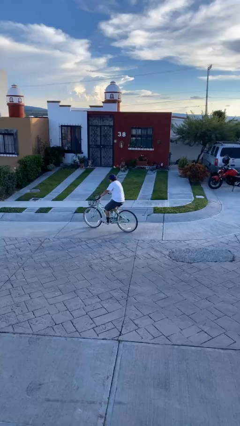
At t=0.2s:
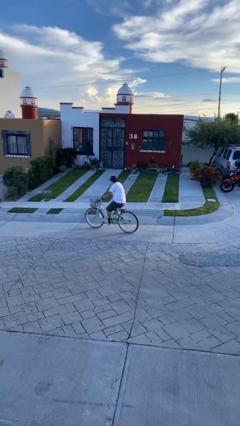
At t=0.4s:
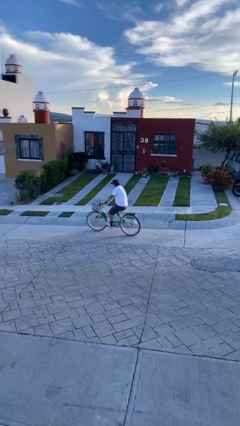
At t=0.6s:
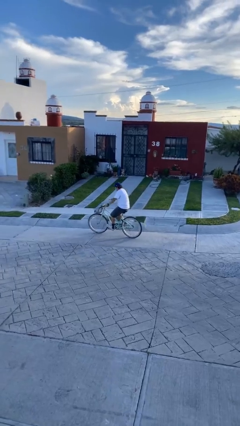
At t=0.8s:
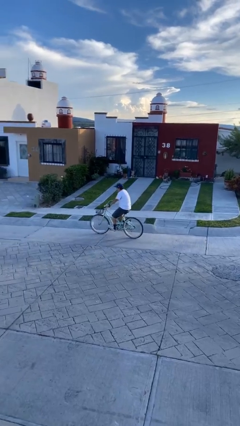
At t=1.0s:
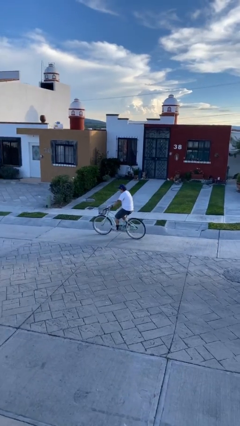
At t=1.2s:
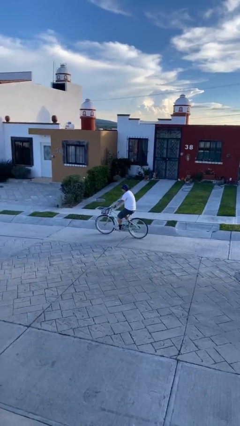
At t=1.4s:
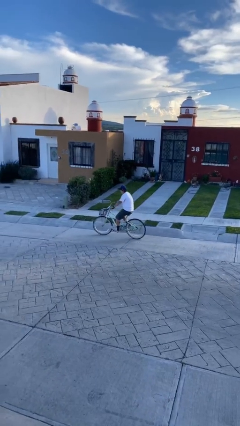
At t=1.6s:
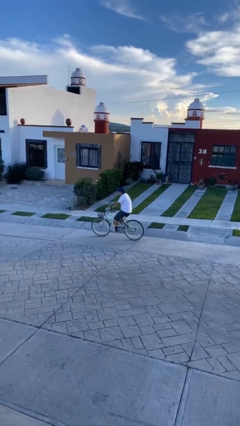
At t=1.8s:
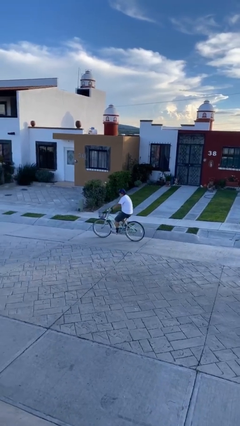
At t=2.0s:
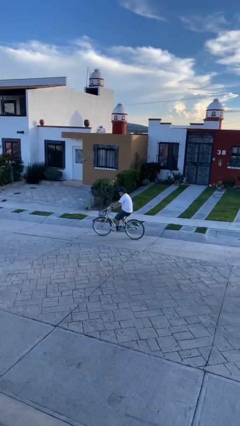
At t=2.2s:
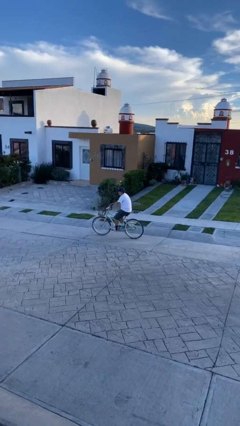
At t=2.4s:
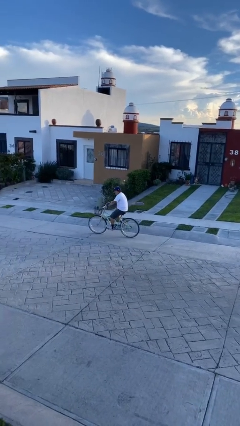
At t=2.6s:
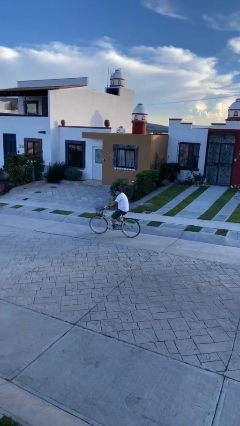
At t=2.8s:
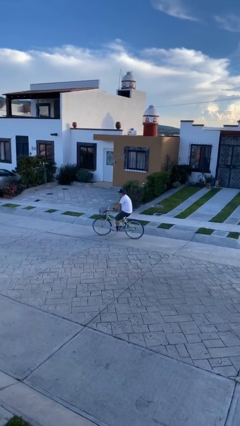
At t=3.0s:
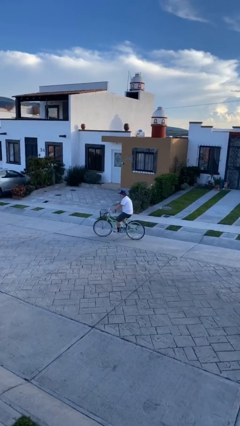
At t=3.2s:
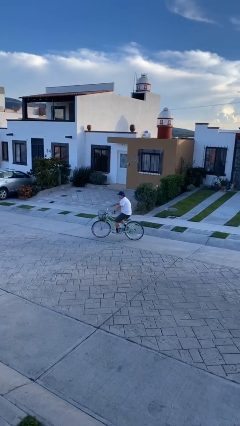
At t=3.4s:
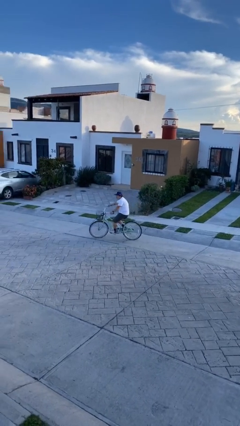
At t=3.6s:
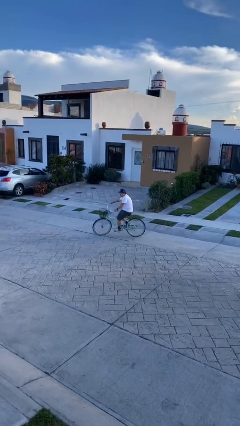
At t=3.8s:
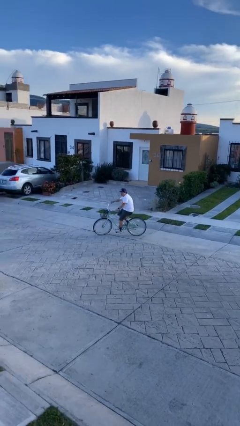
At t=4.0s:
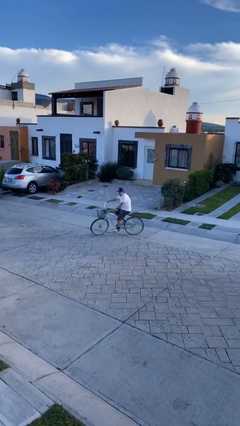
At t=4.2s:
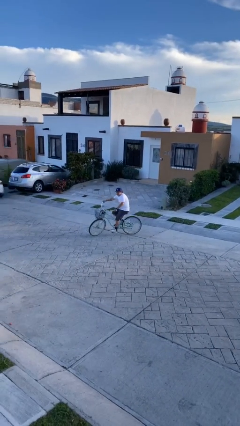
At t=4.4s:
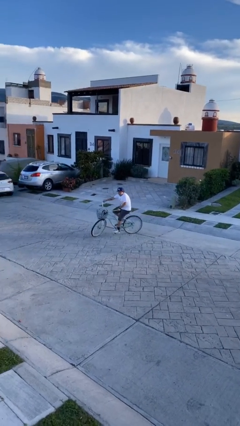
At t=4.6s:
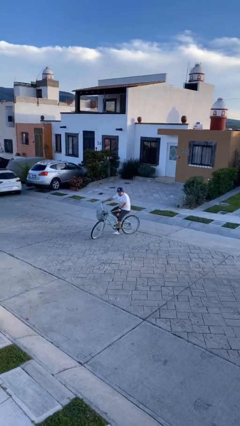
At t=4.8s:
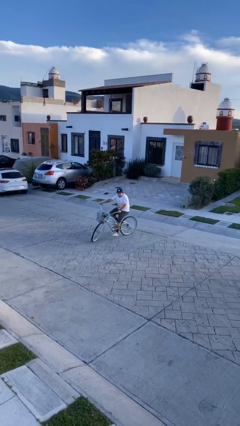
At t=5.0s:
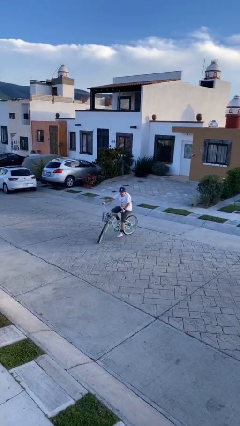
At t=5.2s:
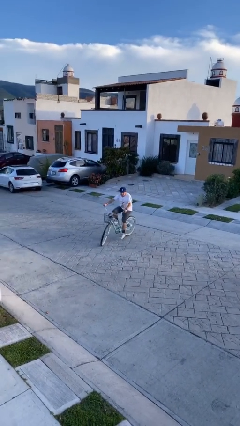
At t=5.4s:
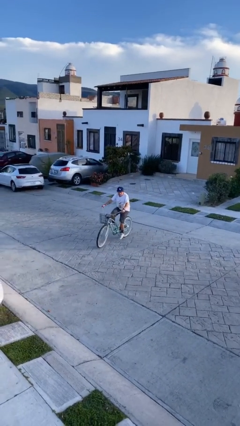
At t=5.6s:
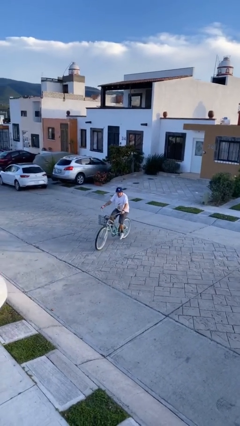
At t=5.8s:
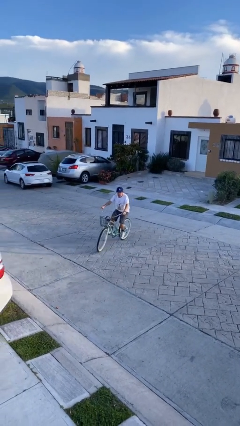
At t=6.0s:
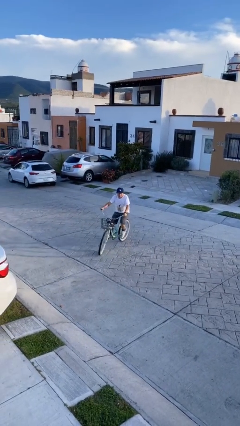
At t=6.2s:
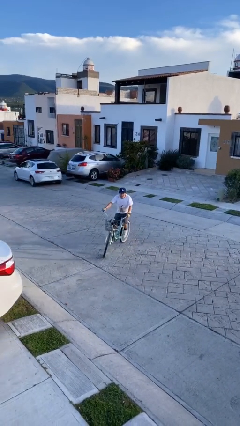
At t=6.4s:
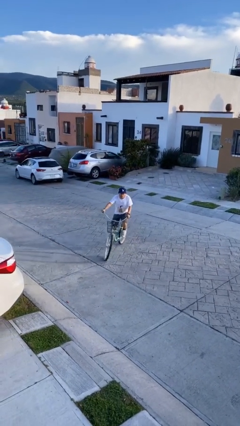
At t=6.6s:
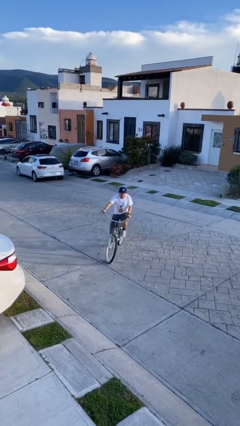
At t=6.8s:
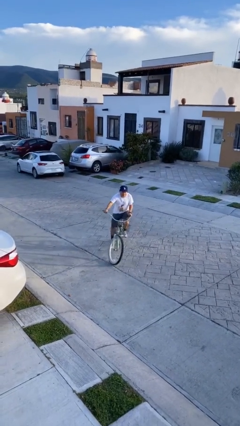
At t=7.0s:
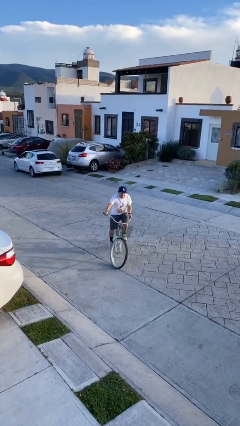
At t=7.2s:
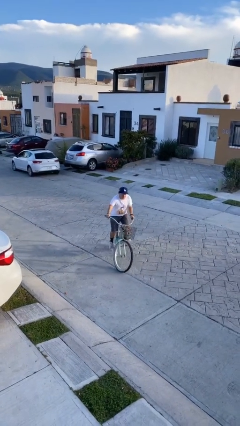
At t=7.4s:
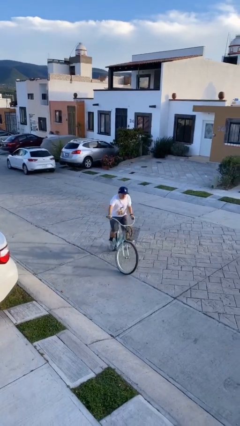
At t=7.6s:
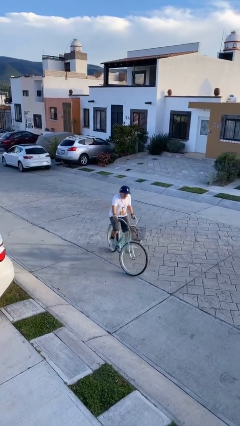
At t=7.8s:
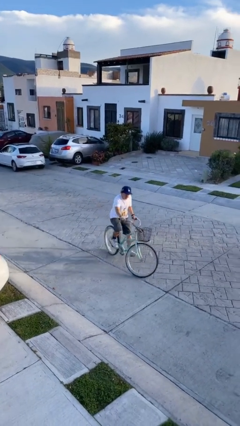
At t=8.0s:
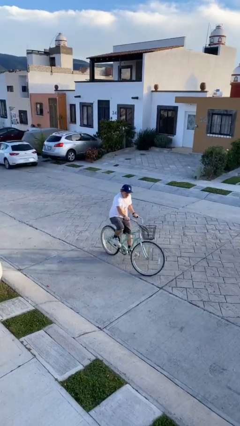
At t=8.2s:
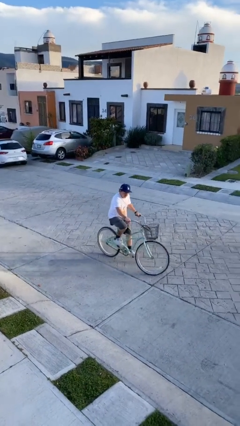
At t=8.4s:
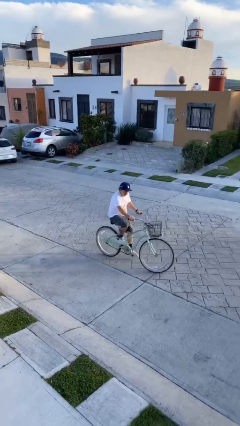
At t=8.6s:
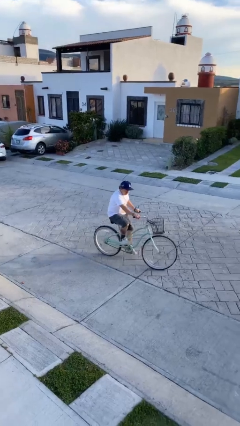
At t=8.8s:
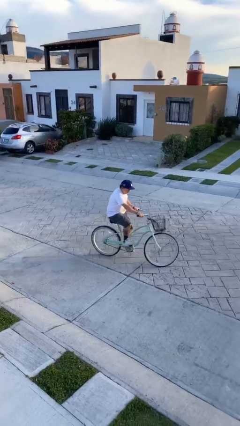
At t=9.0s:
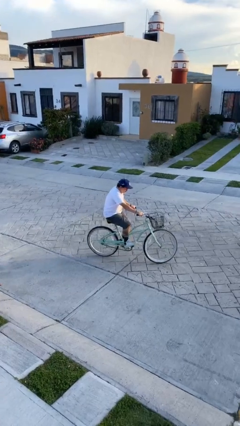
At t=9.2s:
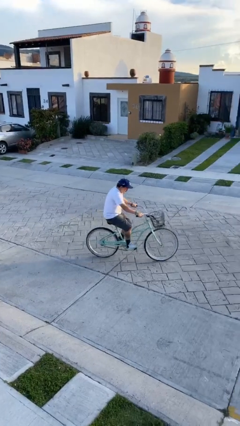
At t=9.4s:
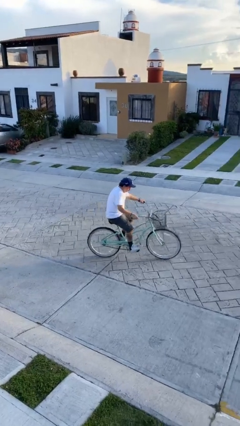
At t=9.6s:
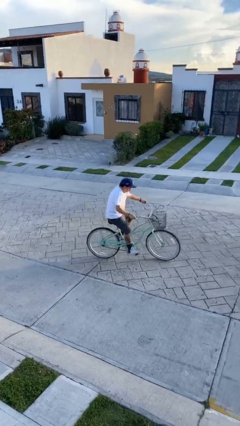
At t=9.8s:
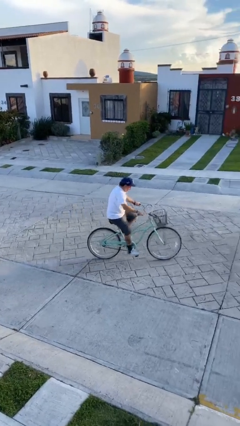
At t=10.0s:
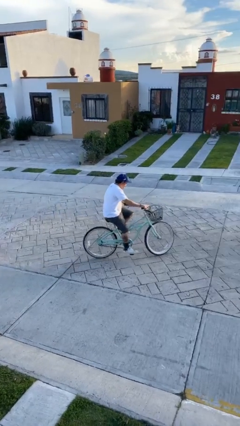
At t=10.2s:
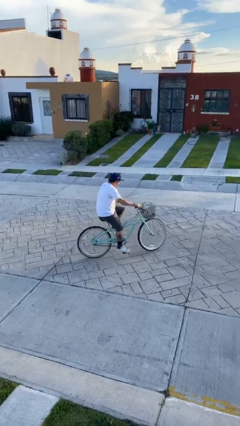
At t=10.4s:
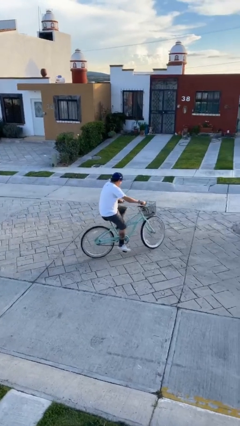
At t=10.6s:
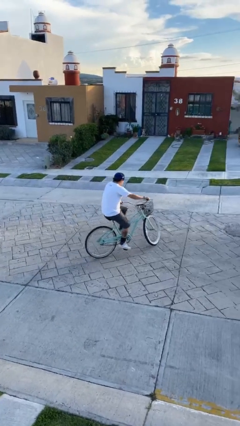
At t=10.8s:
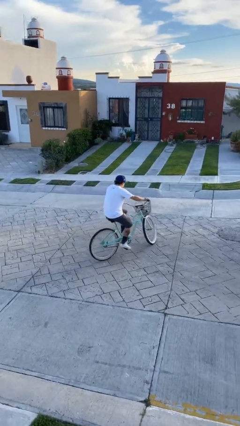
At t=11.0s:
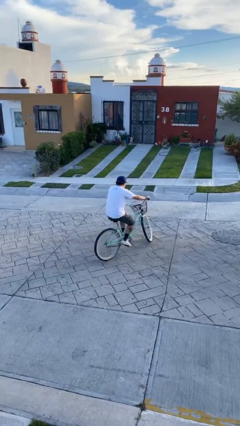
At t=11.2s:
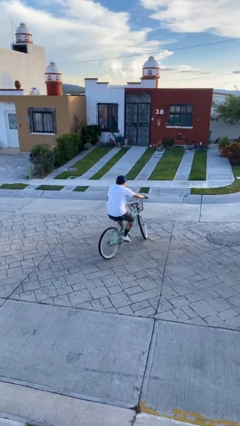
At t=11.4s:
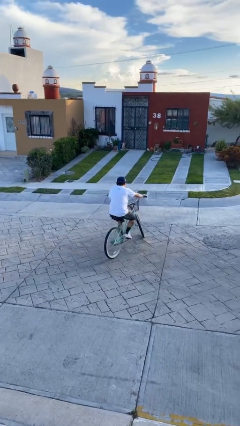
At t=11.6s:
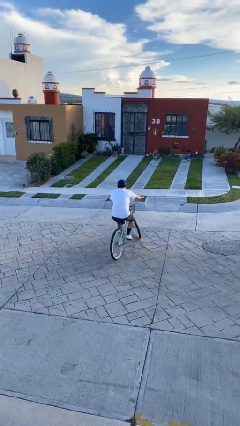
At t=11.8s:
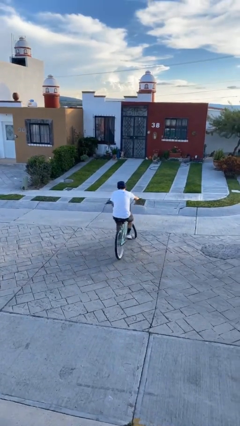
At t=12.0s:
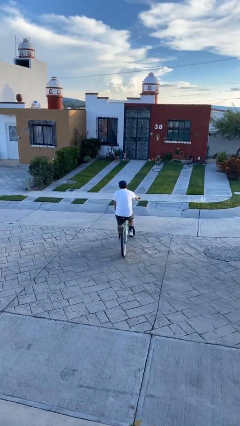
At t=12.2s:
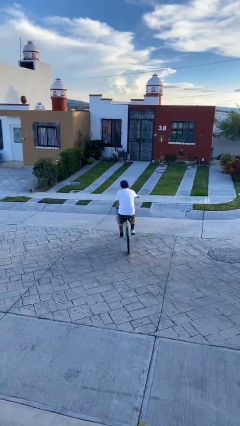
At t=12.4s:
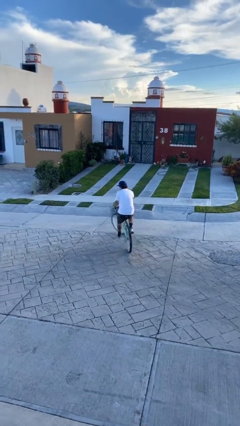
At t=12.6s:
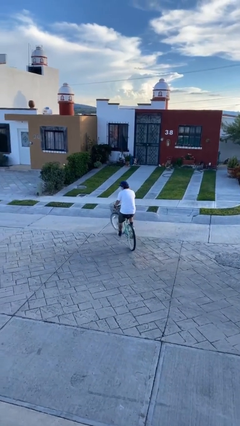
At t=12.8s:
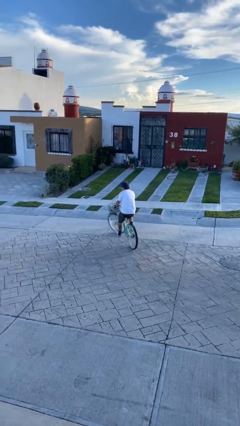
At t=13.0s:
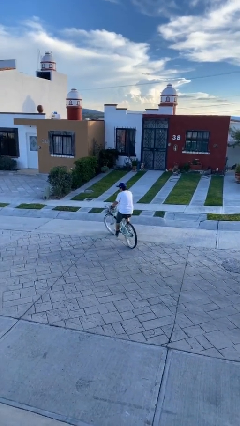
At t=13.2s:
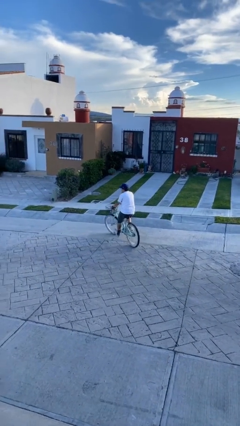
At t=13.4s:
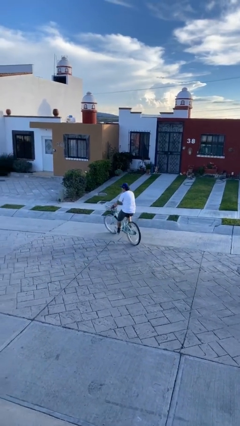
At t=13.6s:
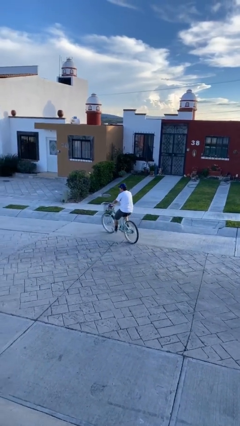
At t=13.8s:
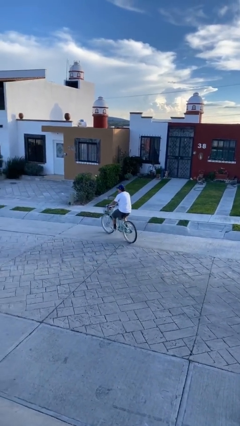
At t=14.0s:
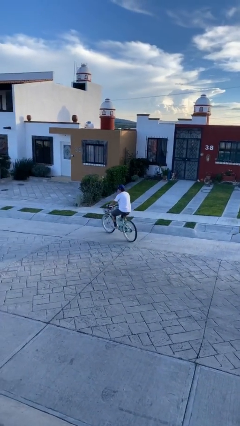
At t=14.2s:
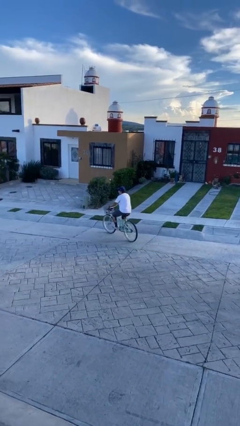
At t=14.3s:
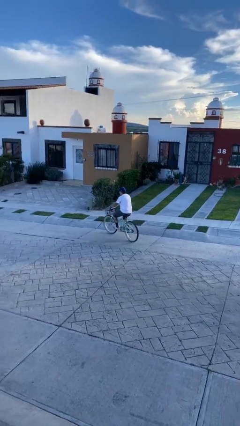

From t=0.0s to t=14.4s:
person rides bicycle

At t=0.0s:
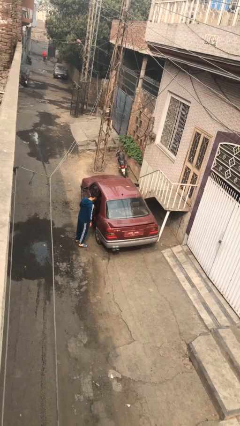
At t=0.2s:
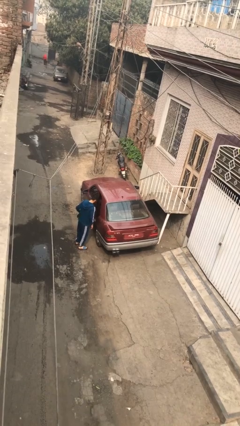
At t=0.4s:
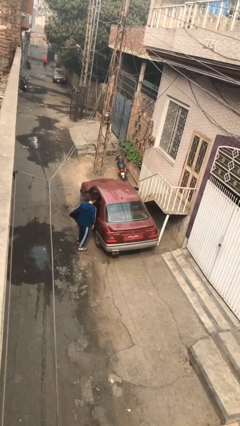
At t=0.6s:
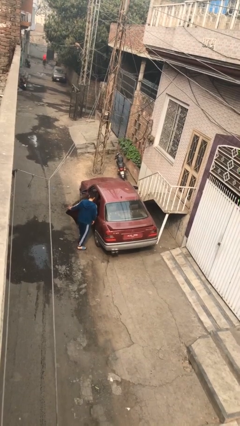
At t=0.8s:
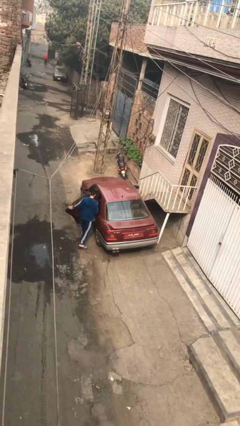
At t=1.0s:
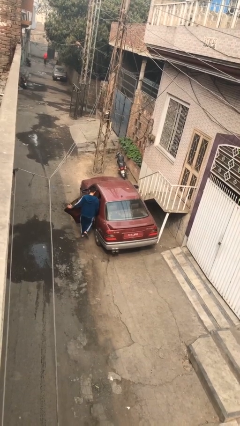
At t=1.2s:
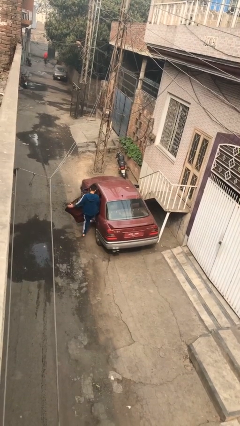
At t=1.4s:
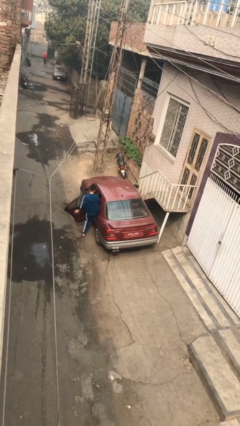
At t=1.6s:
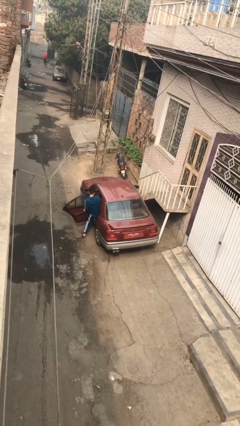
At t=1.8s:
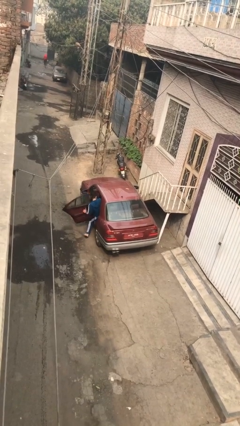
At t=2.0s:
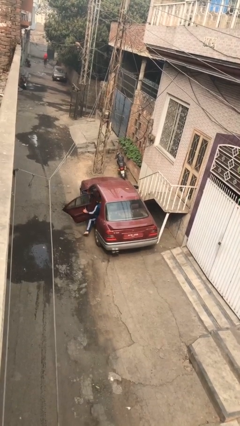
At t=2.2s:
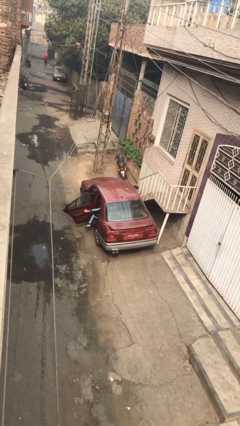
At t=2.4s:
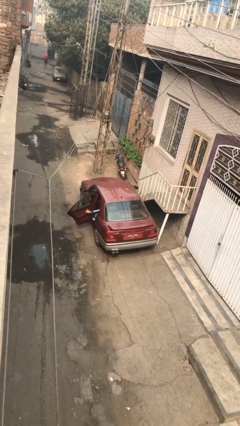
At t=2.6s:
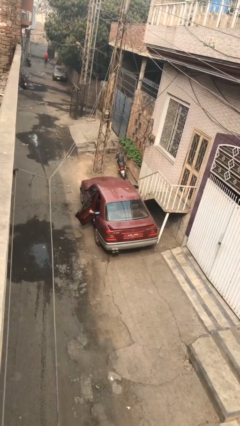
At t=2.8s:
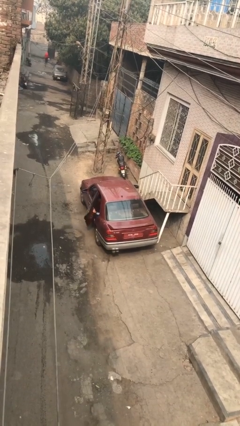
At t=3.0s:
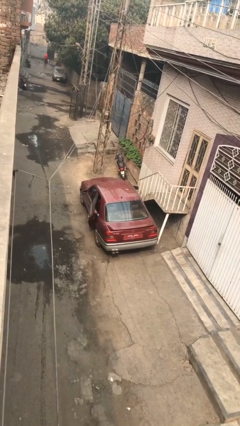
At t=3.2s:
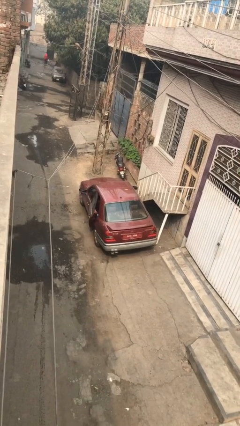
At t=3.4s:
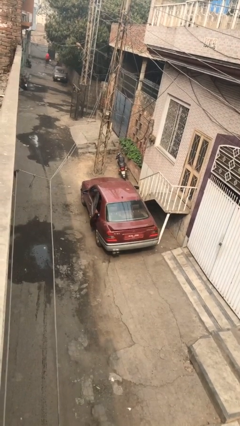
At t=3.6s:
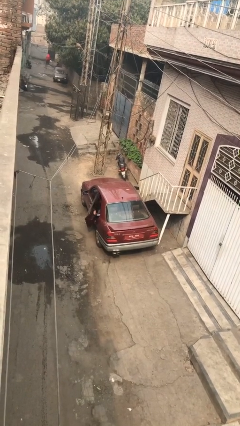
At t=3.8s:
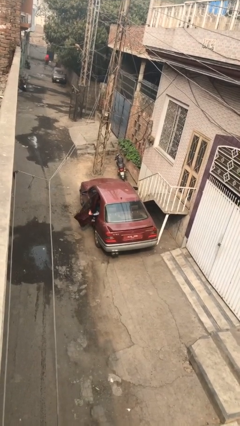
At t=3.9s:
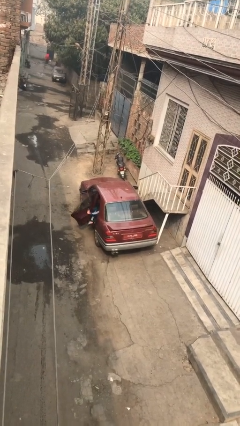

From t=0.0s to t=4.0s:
car picks up person

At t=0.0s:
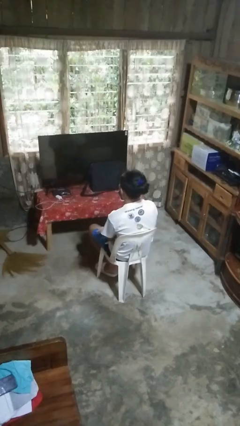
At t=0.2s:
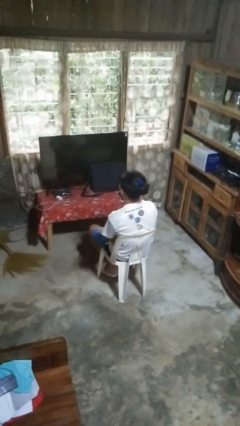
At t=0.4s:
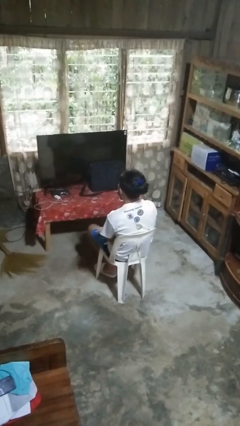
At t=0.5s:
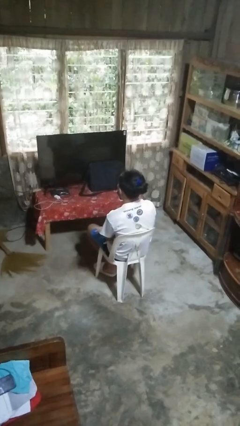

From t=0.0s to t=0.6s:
person gestures swipe up
